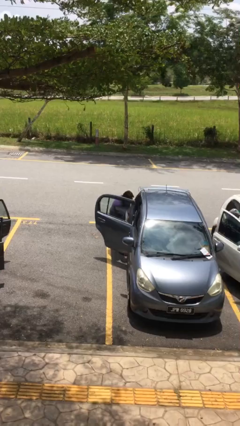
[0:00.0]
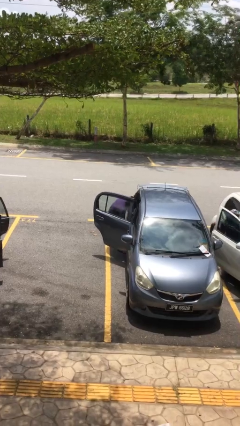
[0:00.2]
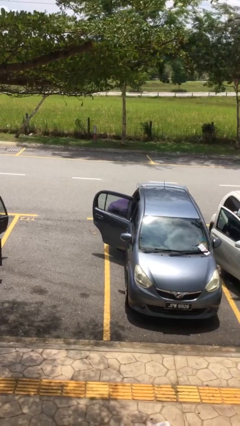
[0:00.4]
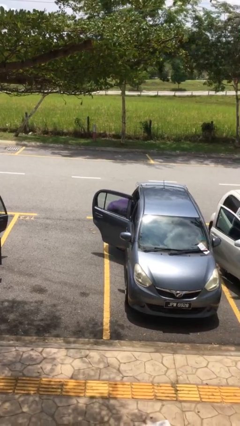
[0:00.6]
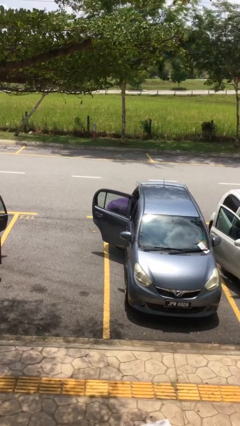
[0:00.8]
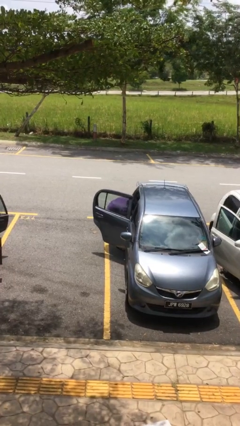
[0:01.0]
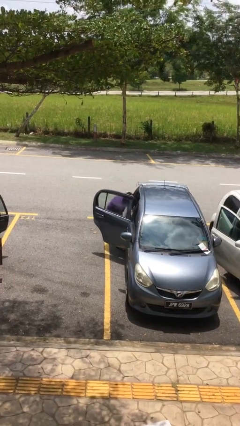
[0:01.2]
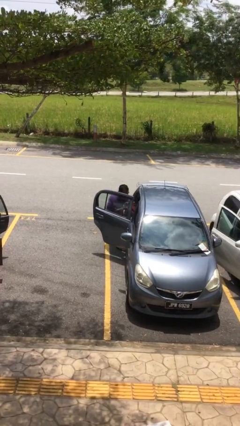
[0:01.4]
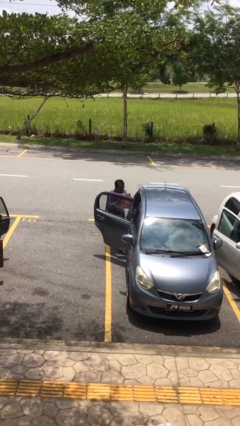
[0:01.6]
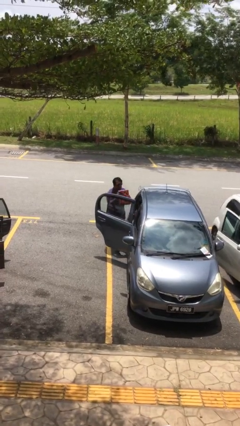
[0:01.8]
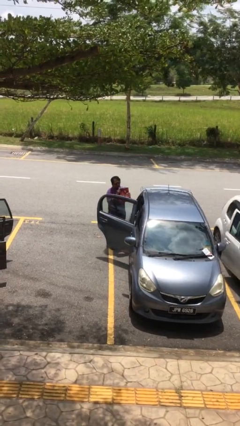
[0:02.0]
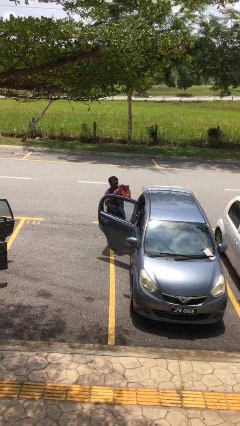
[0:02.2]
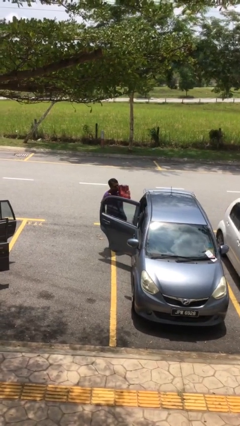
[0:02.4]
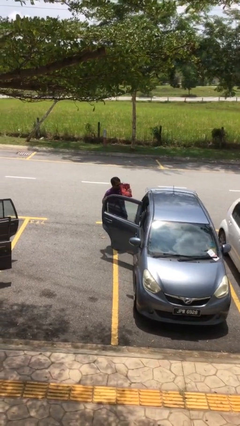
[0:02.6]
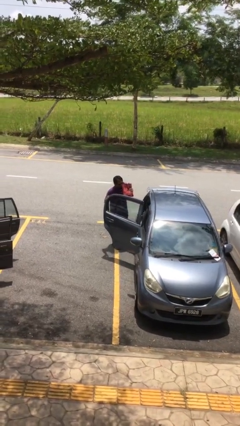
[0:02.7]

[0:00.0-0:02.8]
person unloads car

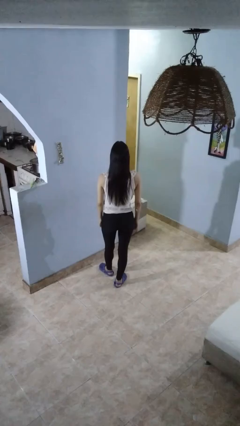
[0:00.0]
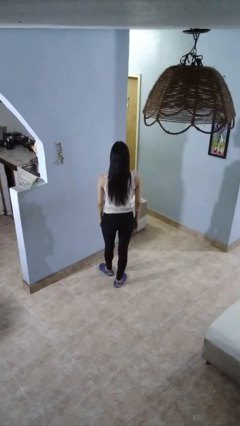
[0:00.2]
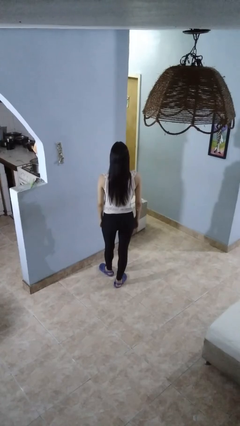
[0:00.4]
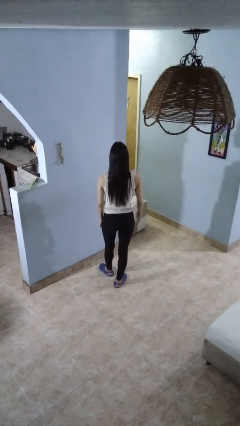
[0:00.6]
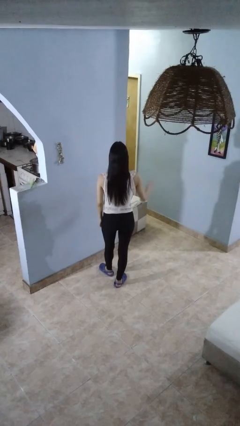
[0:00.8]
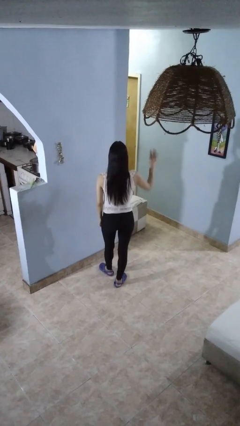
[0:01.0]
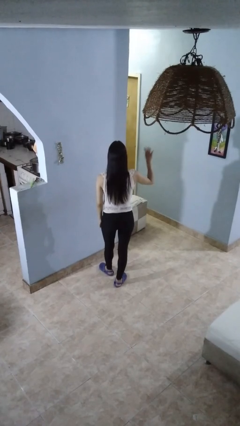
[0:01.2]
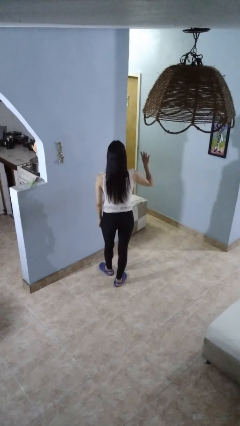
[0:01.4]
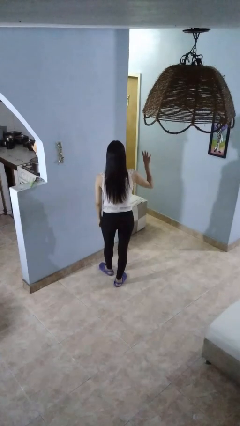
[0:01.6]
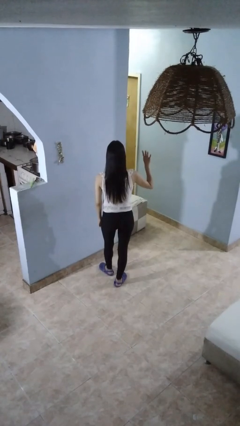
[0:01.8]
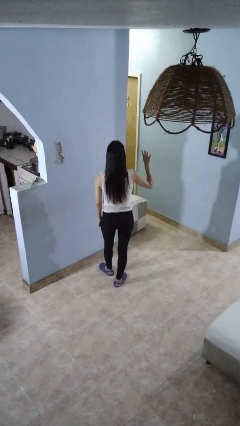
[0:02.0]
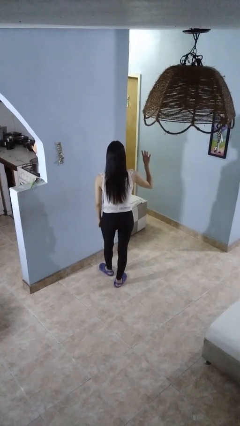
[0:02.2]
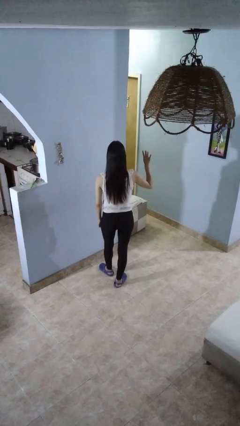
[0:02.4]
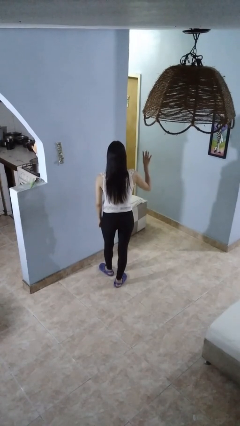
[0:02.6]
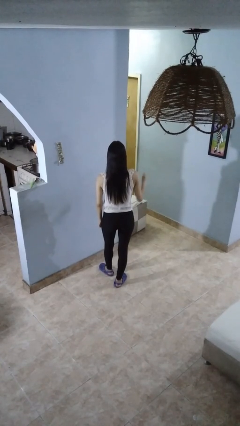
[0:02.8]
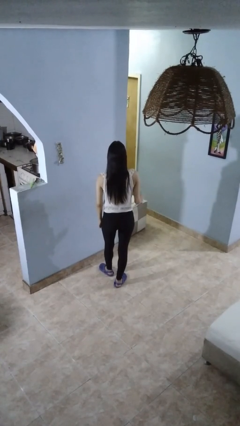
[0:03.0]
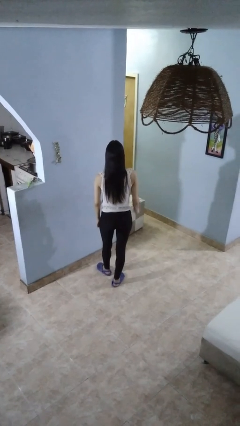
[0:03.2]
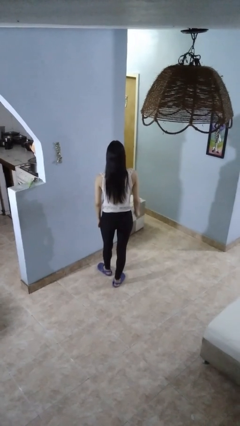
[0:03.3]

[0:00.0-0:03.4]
person gestures number four

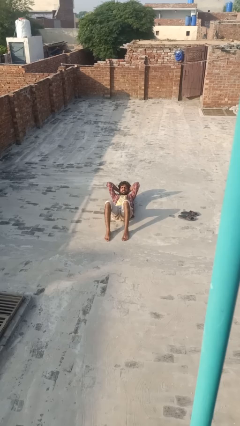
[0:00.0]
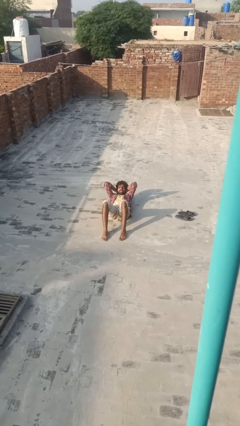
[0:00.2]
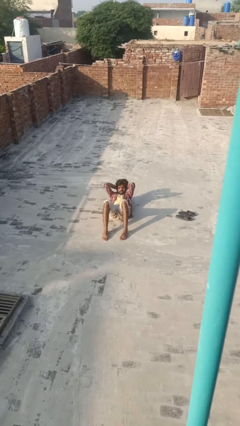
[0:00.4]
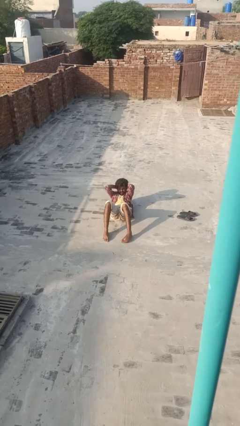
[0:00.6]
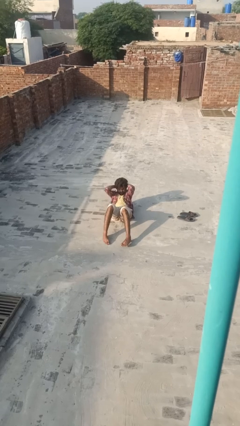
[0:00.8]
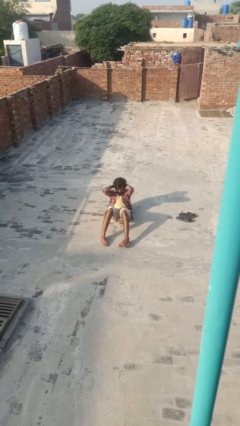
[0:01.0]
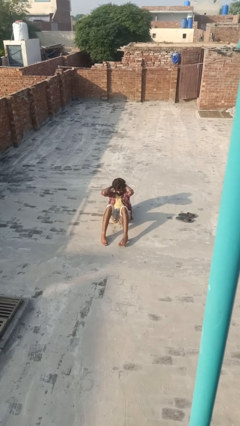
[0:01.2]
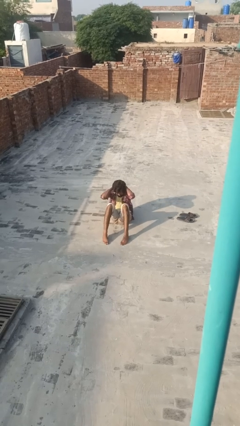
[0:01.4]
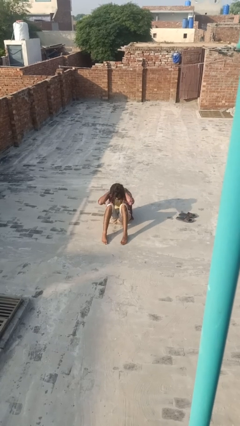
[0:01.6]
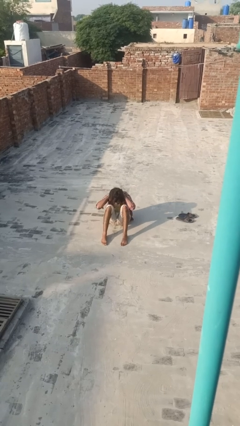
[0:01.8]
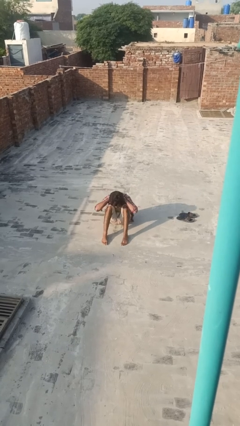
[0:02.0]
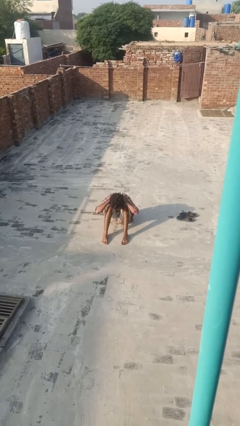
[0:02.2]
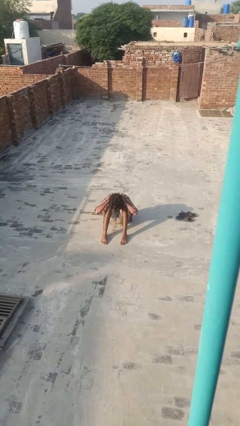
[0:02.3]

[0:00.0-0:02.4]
person exercises with situp

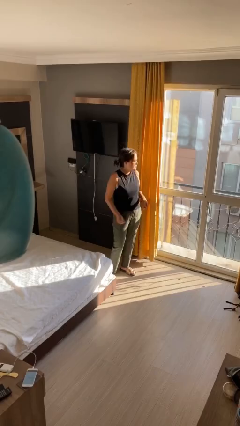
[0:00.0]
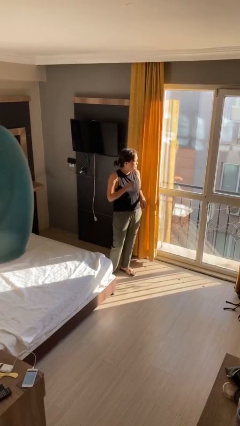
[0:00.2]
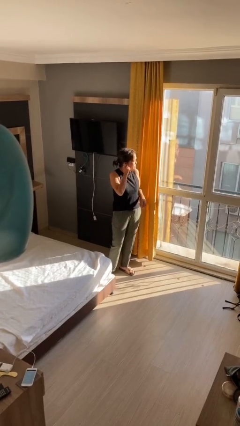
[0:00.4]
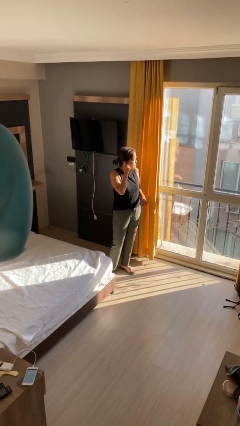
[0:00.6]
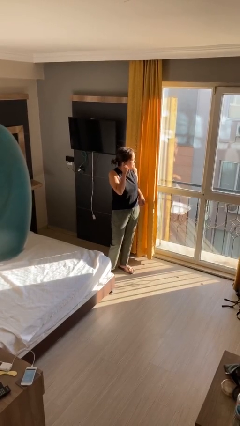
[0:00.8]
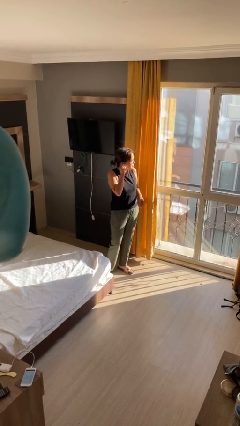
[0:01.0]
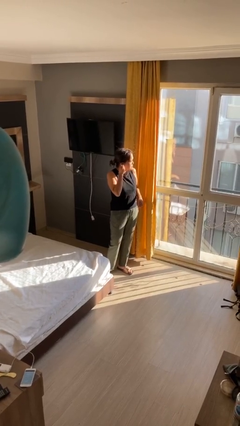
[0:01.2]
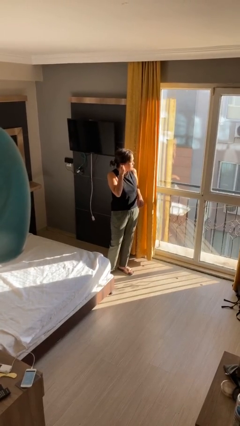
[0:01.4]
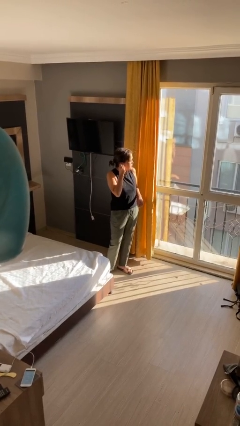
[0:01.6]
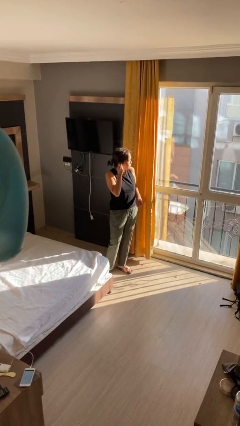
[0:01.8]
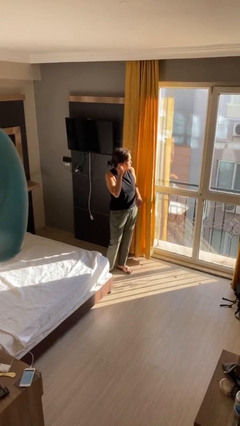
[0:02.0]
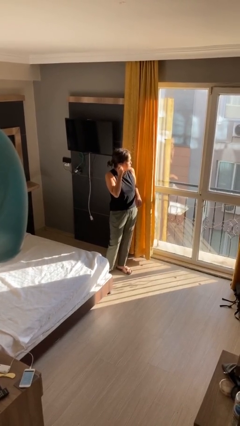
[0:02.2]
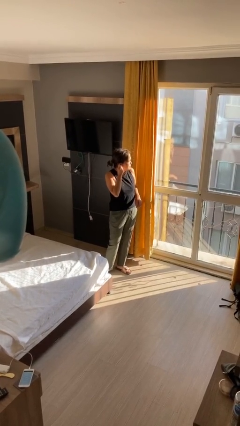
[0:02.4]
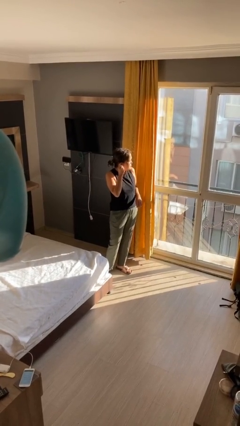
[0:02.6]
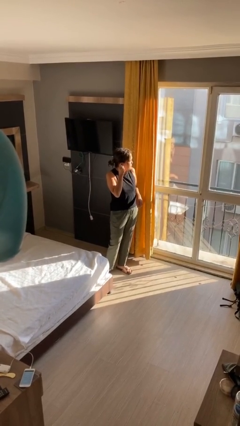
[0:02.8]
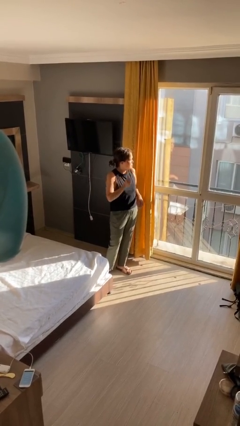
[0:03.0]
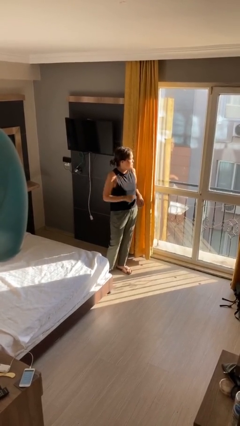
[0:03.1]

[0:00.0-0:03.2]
person touches earlobe

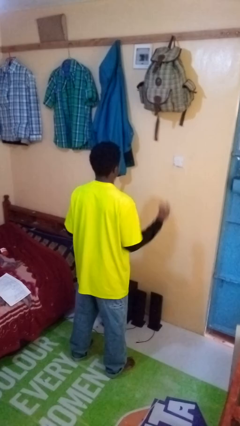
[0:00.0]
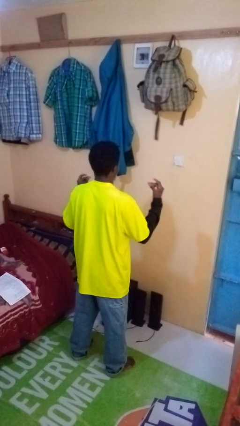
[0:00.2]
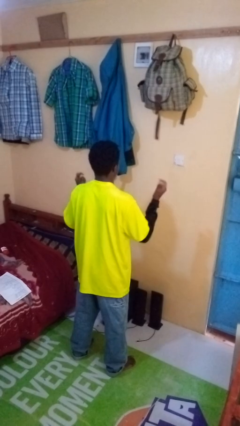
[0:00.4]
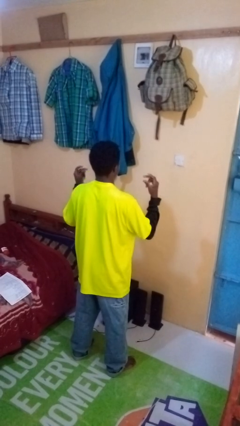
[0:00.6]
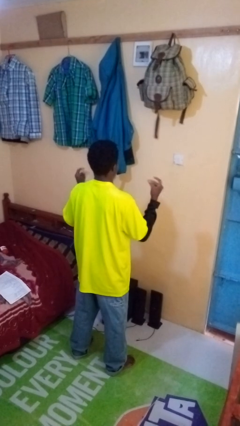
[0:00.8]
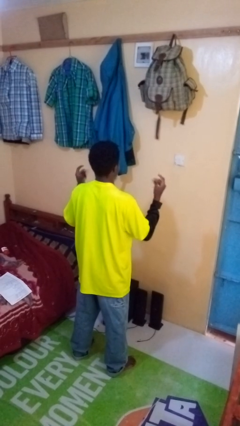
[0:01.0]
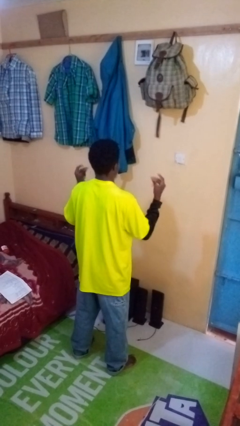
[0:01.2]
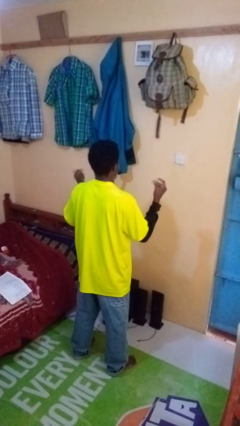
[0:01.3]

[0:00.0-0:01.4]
person snaps fingers

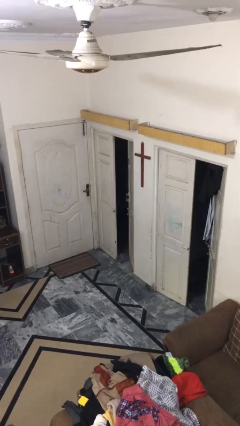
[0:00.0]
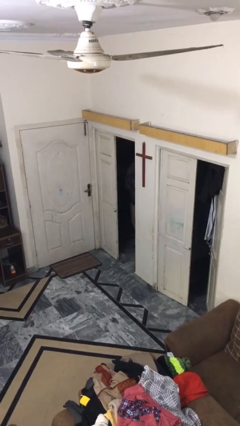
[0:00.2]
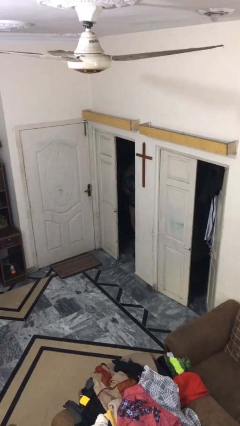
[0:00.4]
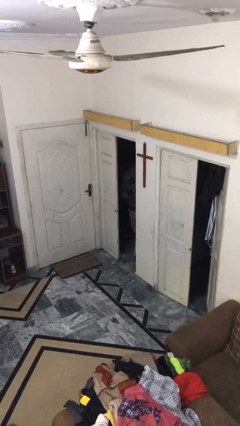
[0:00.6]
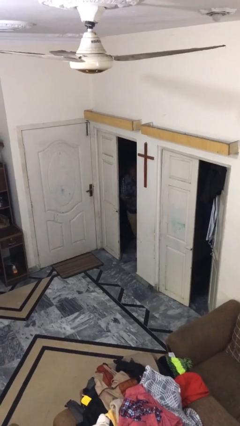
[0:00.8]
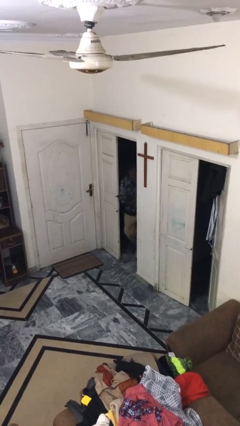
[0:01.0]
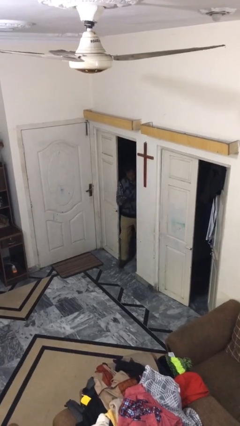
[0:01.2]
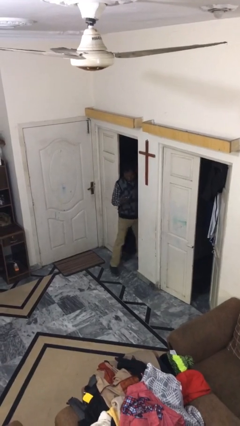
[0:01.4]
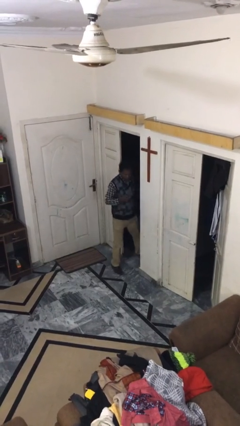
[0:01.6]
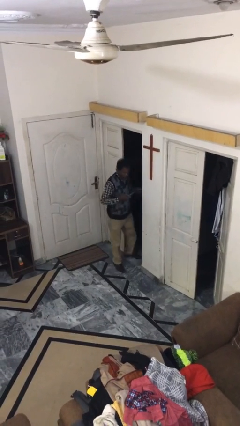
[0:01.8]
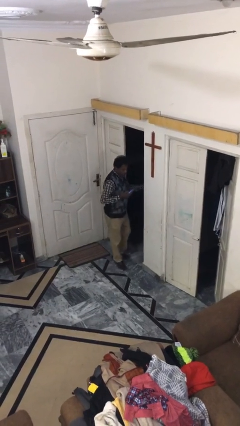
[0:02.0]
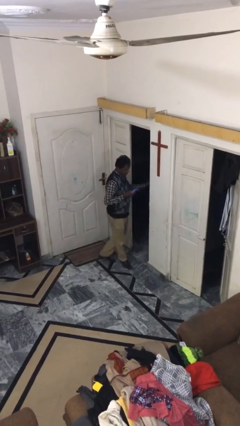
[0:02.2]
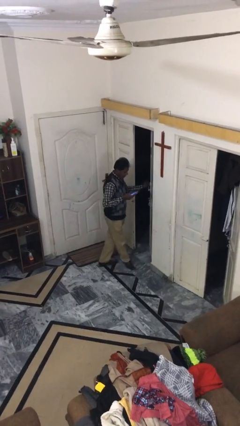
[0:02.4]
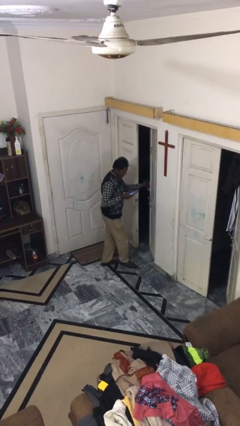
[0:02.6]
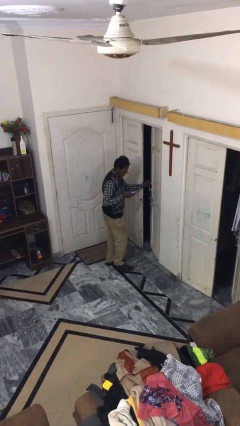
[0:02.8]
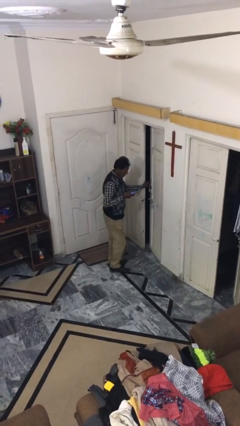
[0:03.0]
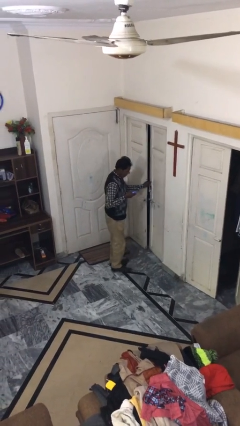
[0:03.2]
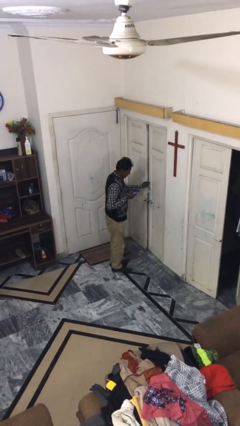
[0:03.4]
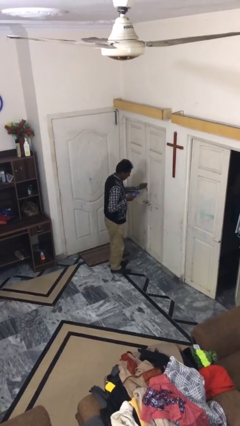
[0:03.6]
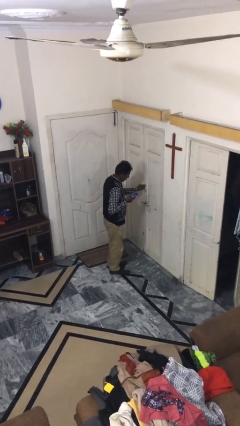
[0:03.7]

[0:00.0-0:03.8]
person enters scene through structure

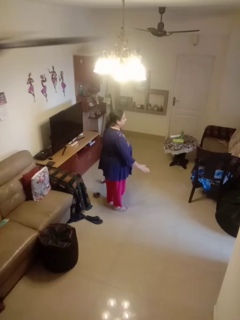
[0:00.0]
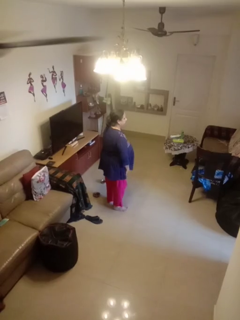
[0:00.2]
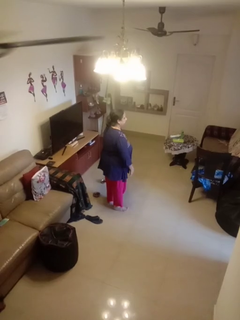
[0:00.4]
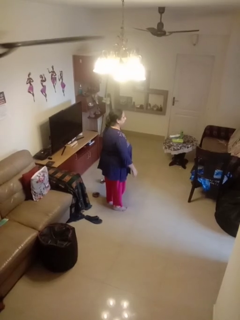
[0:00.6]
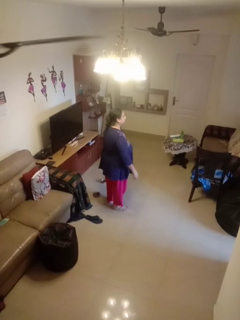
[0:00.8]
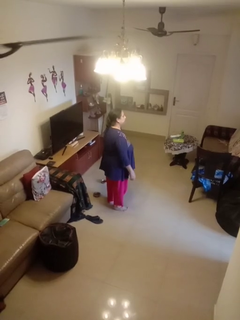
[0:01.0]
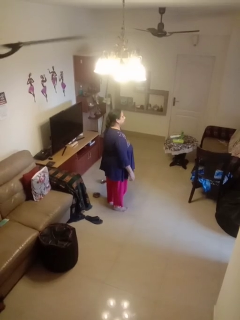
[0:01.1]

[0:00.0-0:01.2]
person slaps hands on thighs
